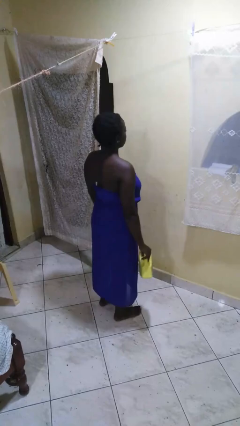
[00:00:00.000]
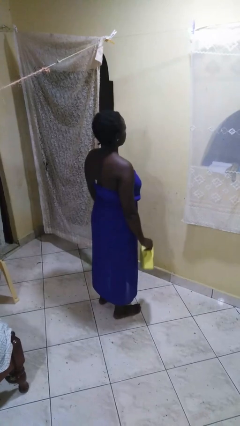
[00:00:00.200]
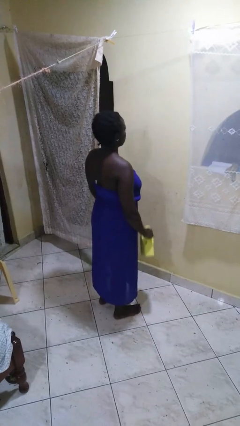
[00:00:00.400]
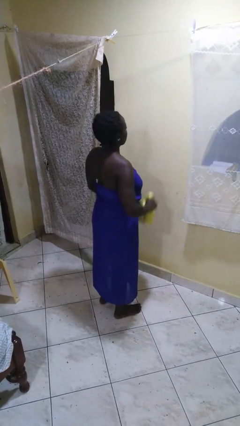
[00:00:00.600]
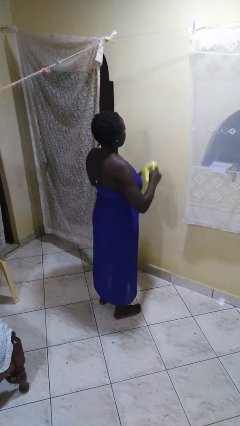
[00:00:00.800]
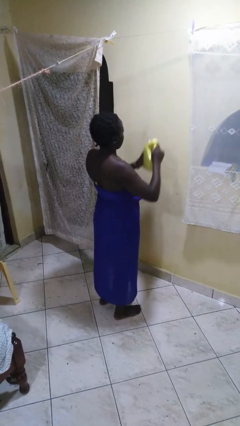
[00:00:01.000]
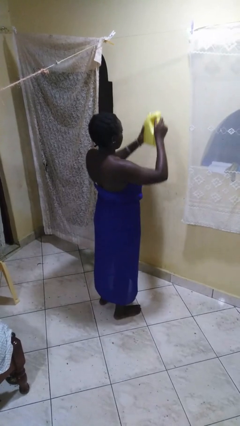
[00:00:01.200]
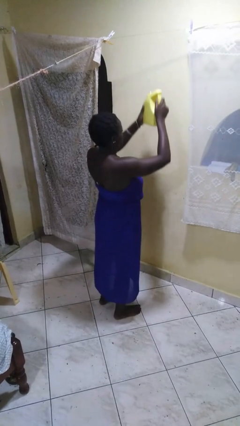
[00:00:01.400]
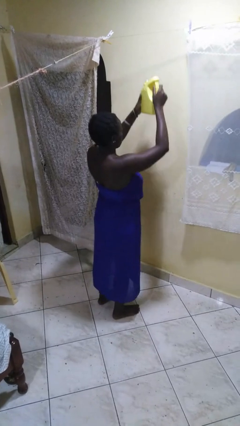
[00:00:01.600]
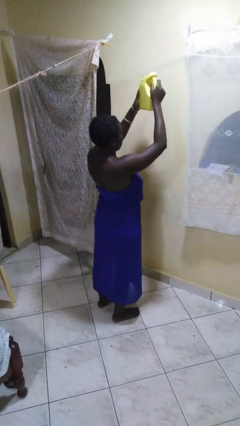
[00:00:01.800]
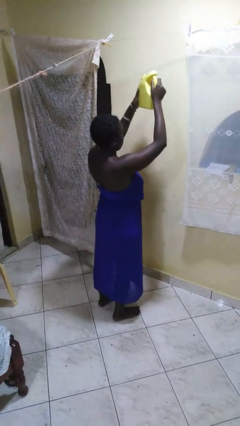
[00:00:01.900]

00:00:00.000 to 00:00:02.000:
person holds object above head

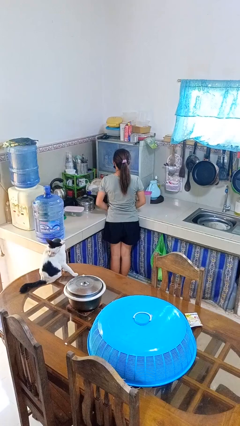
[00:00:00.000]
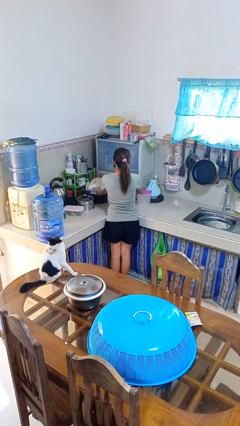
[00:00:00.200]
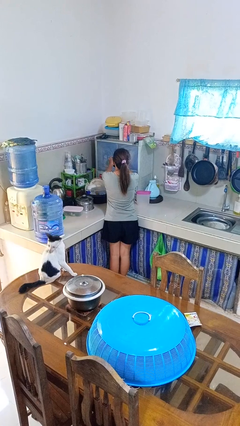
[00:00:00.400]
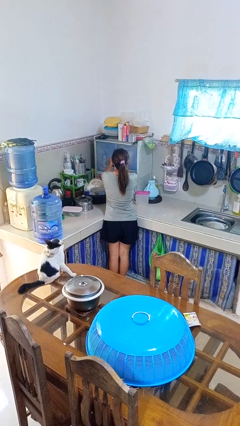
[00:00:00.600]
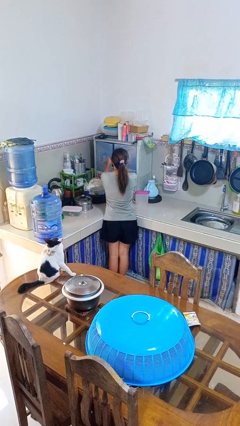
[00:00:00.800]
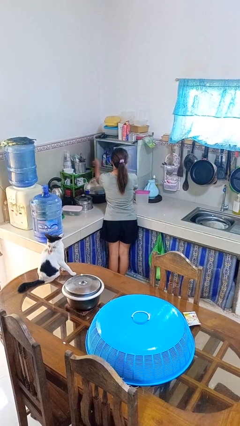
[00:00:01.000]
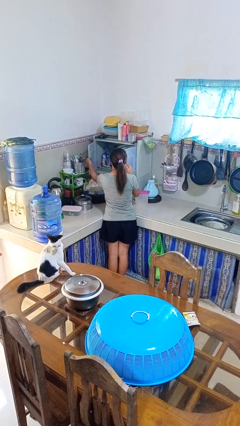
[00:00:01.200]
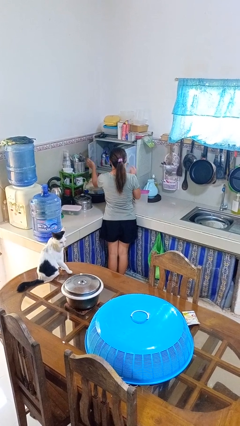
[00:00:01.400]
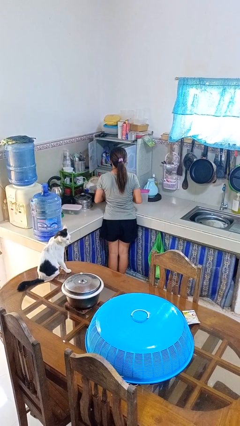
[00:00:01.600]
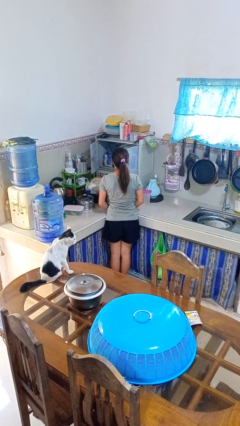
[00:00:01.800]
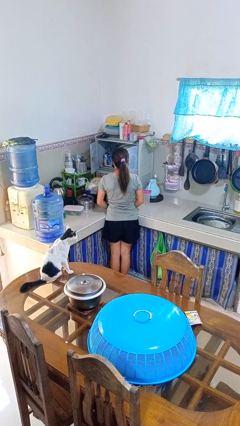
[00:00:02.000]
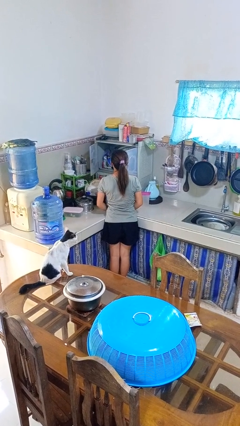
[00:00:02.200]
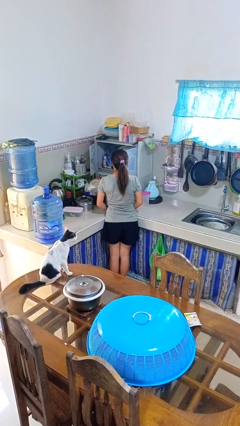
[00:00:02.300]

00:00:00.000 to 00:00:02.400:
person opens kitchen drawer

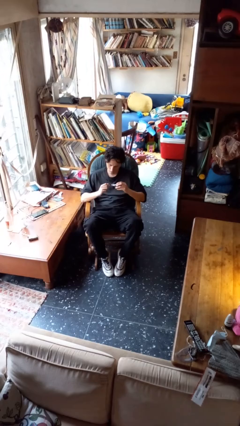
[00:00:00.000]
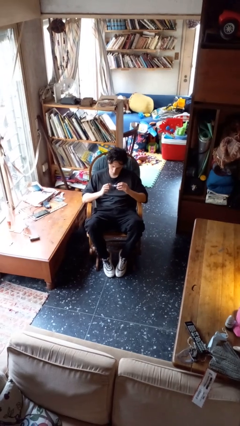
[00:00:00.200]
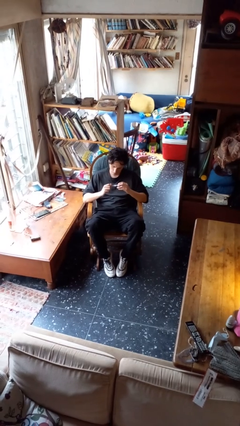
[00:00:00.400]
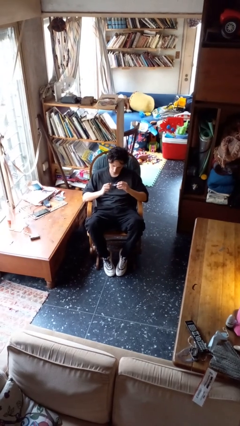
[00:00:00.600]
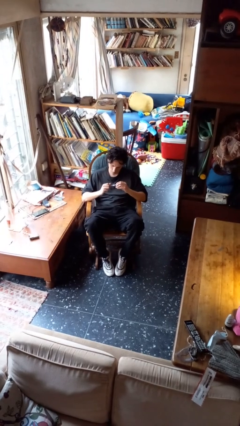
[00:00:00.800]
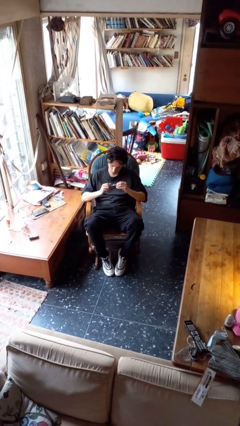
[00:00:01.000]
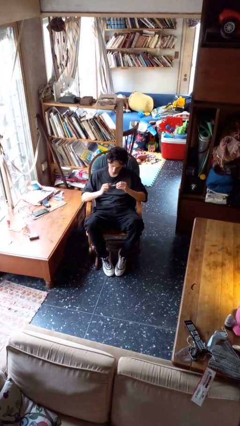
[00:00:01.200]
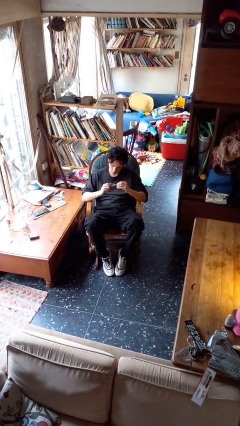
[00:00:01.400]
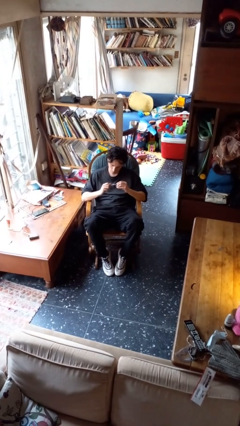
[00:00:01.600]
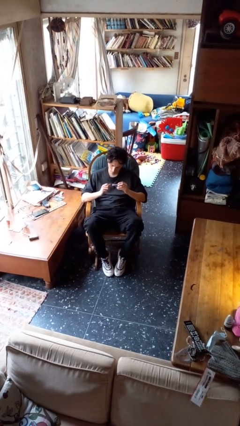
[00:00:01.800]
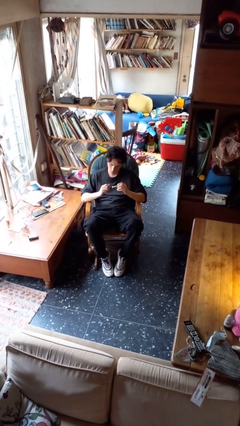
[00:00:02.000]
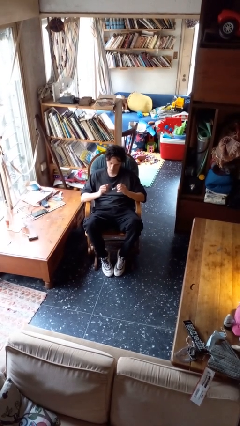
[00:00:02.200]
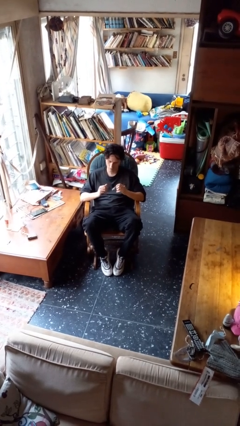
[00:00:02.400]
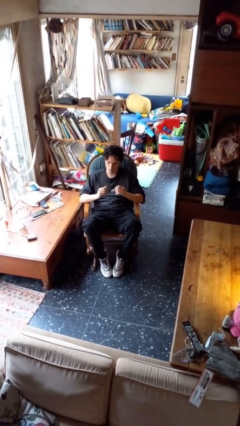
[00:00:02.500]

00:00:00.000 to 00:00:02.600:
person clips fingernails

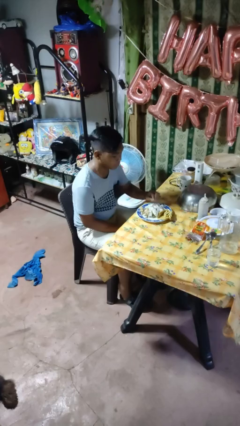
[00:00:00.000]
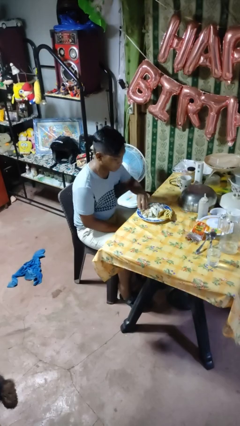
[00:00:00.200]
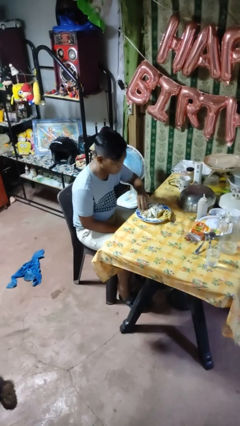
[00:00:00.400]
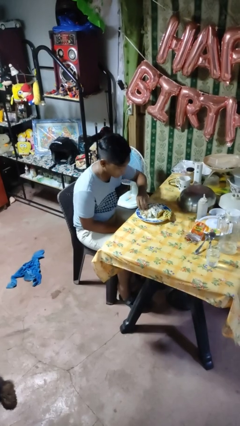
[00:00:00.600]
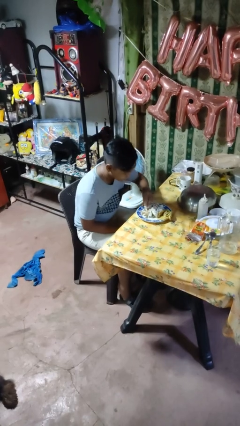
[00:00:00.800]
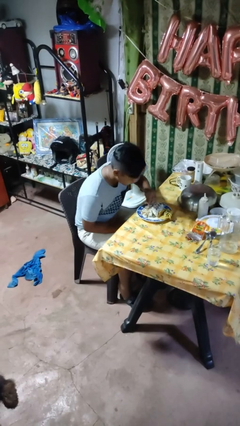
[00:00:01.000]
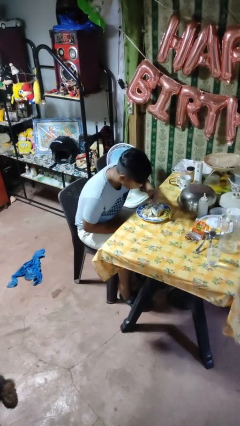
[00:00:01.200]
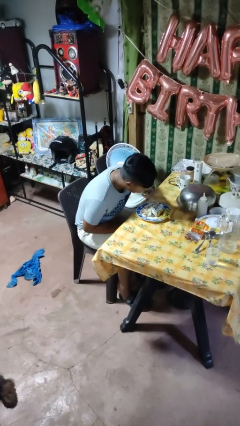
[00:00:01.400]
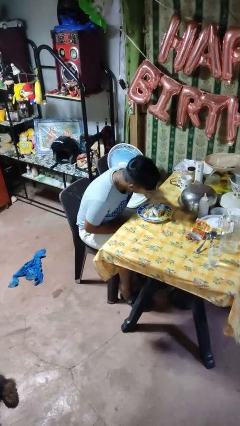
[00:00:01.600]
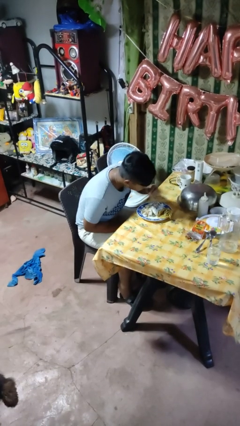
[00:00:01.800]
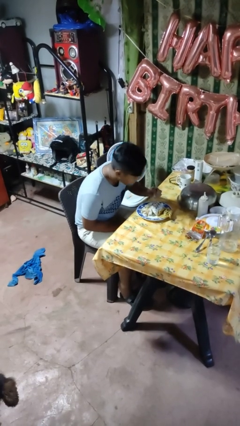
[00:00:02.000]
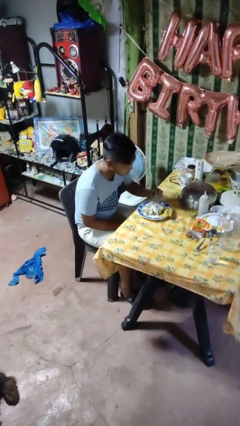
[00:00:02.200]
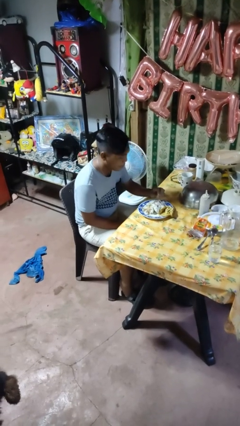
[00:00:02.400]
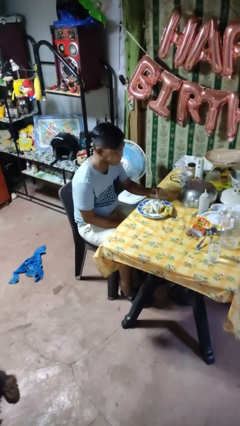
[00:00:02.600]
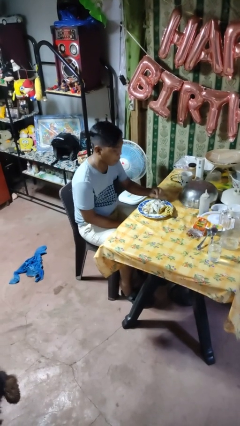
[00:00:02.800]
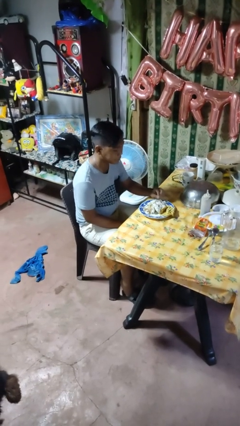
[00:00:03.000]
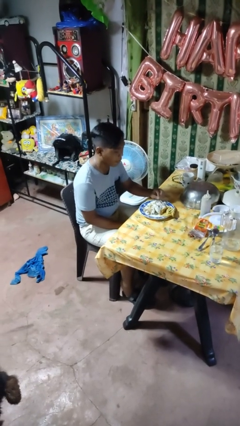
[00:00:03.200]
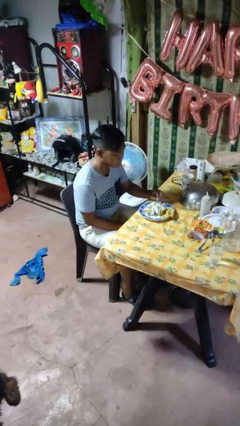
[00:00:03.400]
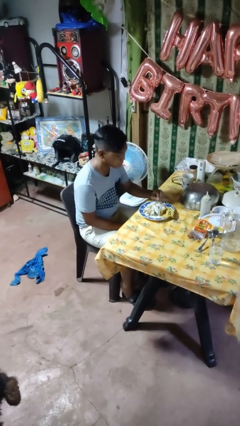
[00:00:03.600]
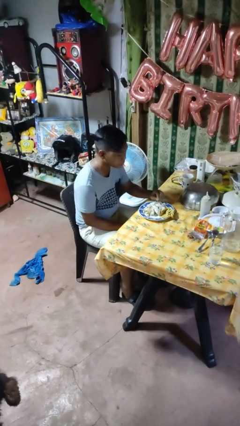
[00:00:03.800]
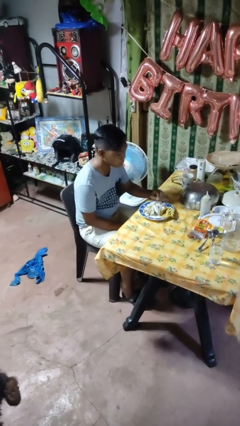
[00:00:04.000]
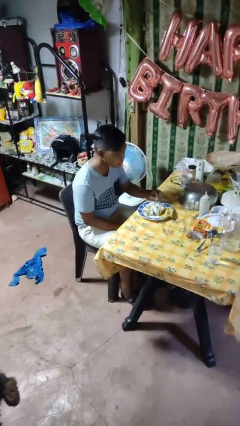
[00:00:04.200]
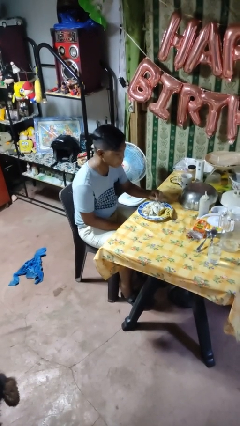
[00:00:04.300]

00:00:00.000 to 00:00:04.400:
person eats with hands

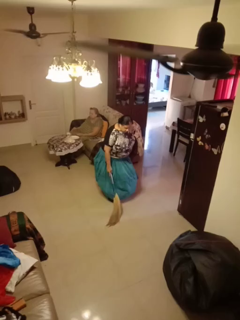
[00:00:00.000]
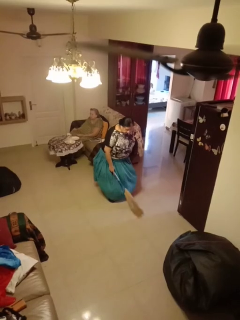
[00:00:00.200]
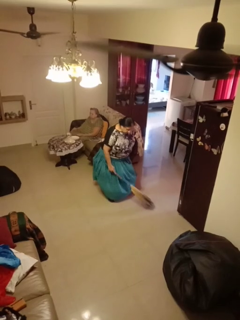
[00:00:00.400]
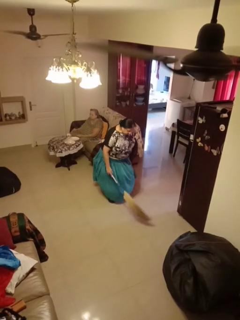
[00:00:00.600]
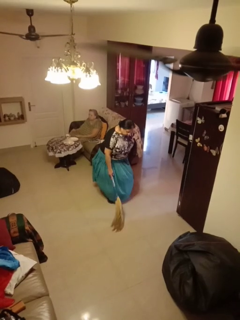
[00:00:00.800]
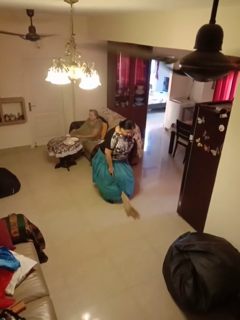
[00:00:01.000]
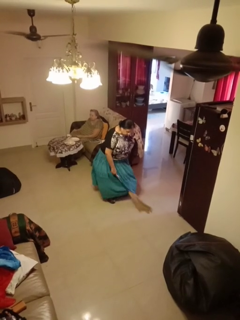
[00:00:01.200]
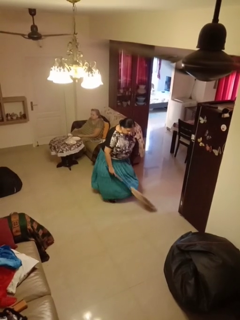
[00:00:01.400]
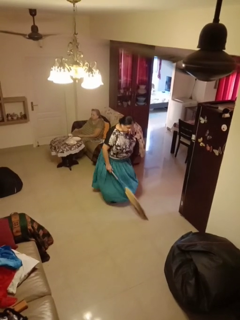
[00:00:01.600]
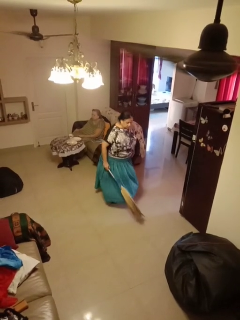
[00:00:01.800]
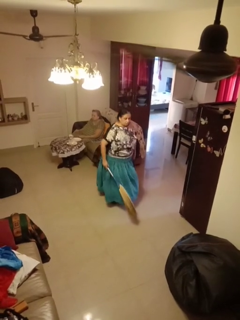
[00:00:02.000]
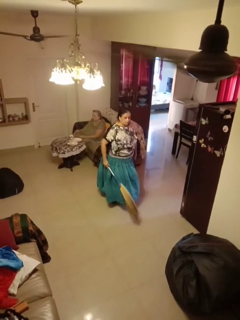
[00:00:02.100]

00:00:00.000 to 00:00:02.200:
person sweeps floor

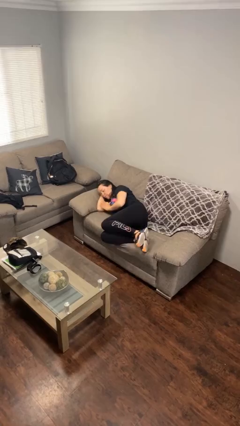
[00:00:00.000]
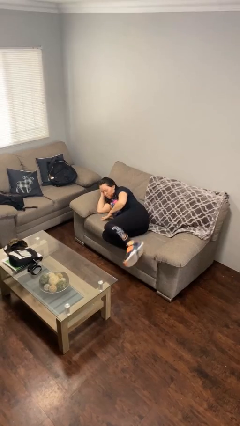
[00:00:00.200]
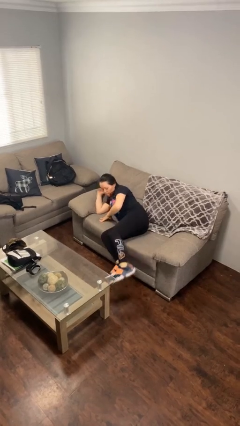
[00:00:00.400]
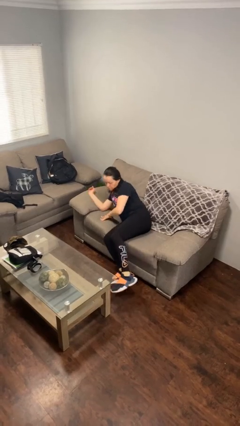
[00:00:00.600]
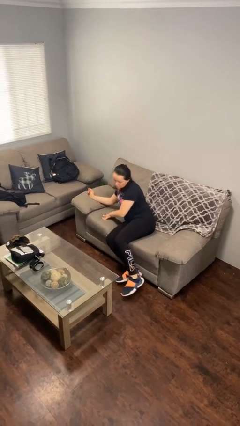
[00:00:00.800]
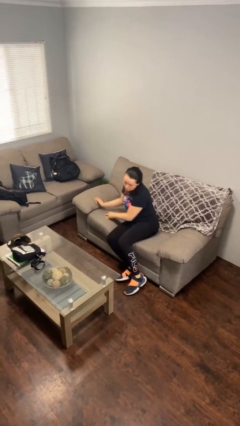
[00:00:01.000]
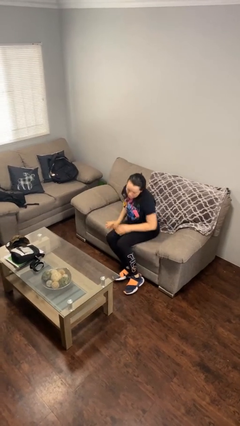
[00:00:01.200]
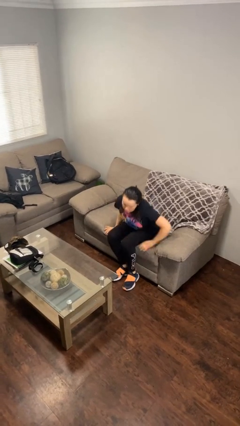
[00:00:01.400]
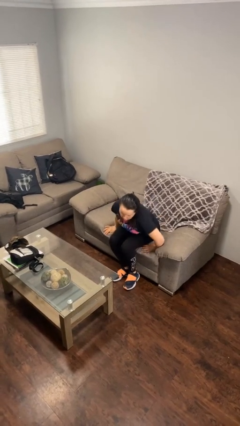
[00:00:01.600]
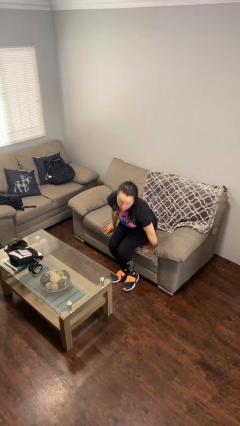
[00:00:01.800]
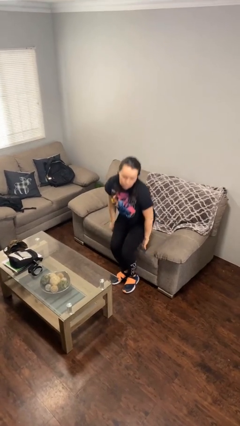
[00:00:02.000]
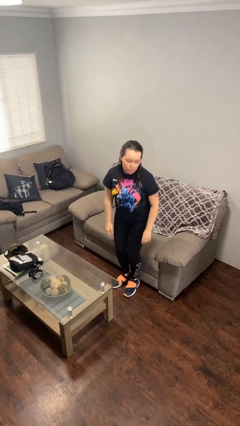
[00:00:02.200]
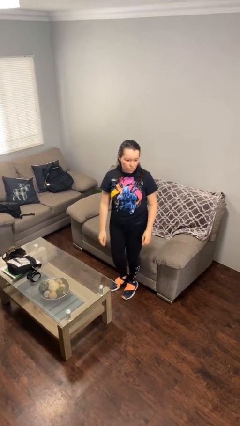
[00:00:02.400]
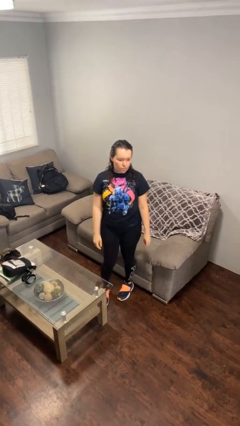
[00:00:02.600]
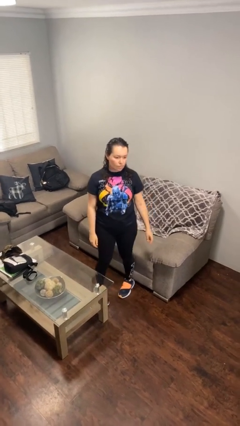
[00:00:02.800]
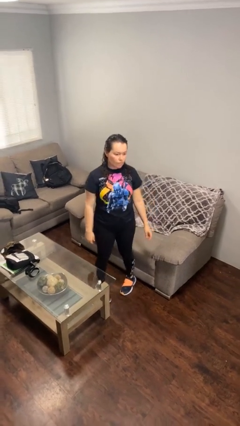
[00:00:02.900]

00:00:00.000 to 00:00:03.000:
person stands up

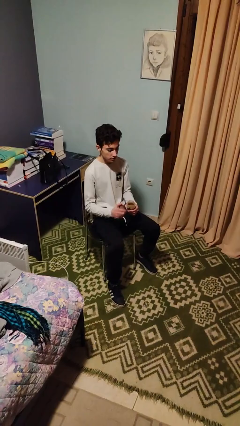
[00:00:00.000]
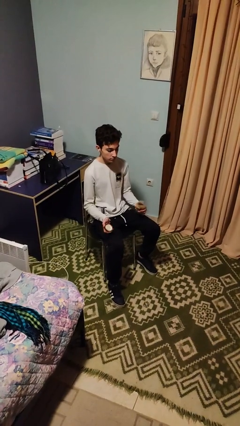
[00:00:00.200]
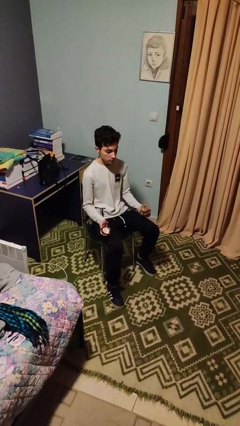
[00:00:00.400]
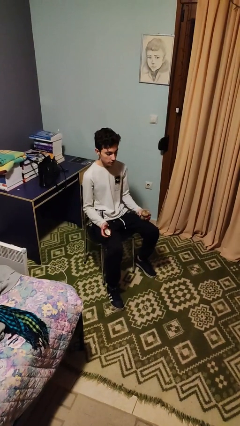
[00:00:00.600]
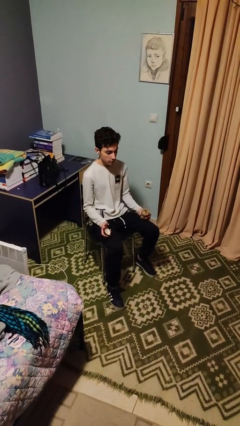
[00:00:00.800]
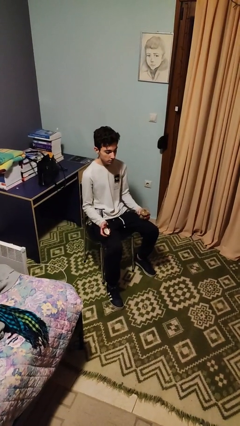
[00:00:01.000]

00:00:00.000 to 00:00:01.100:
person opens jar
